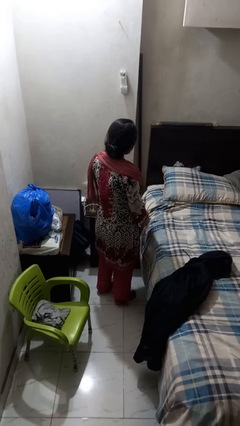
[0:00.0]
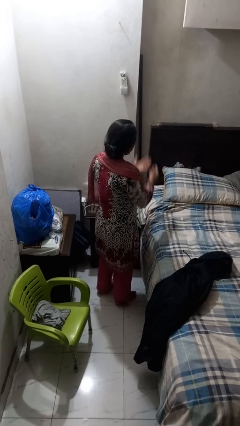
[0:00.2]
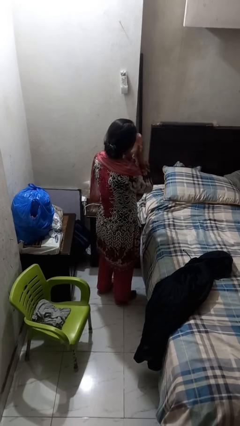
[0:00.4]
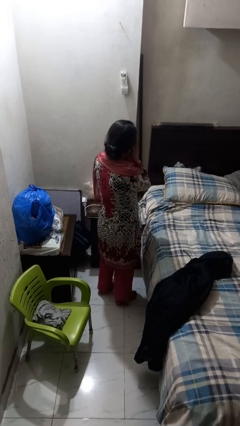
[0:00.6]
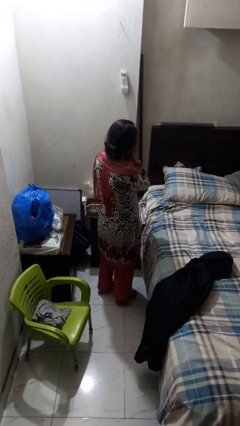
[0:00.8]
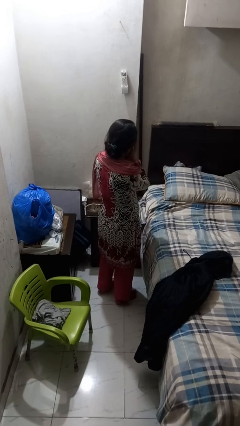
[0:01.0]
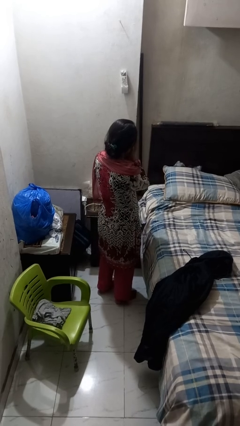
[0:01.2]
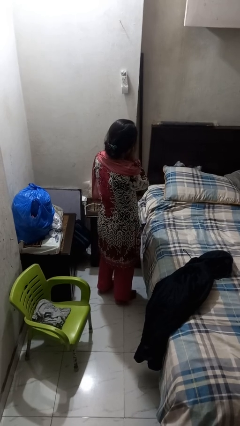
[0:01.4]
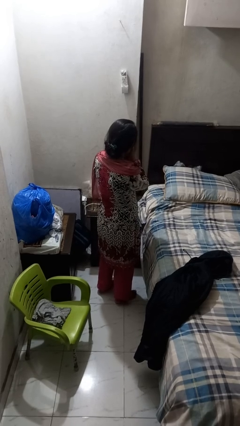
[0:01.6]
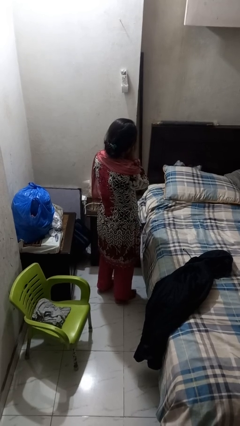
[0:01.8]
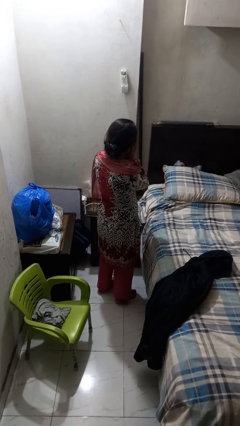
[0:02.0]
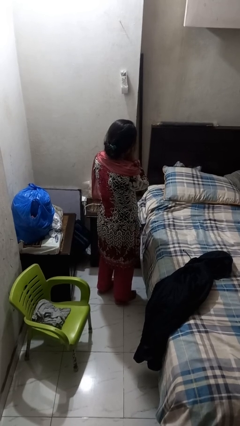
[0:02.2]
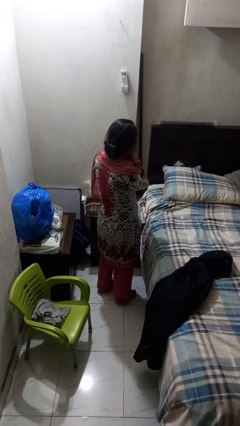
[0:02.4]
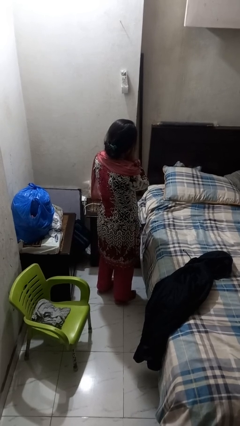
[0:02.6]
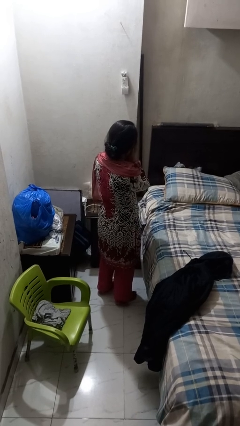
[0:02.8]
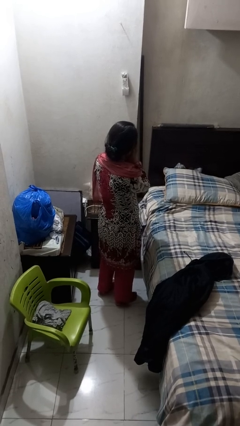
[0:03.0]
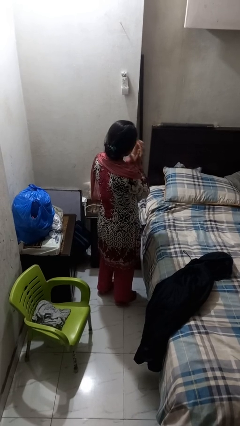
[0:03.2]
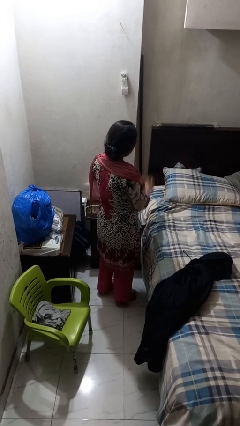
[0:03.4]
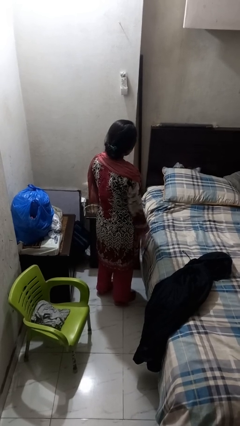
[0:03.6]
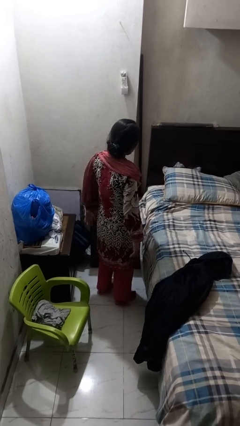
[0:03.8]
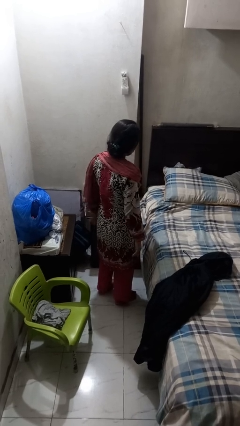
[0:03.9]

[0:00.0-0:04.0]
person covers face with hands

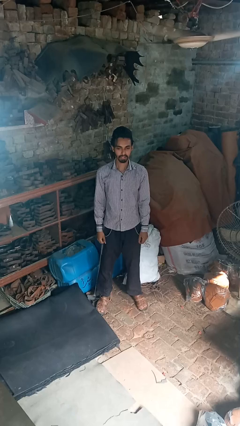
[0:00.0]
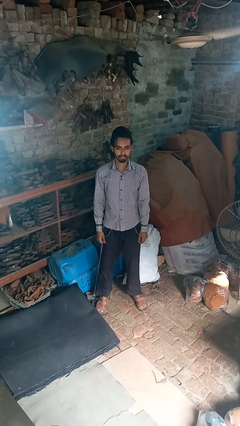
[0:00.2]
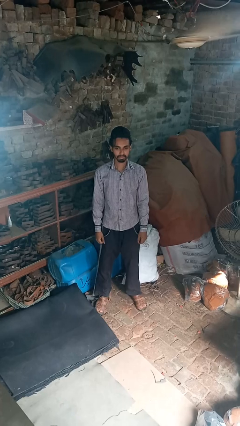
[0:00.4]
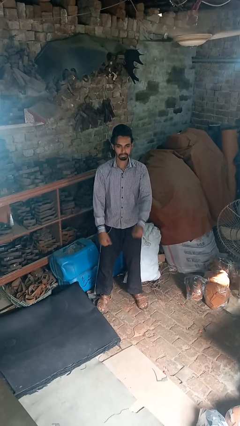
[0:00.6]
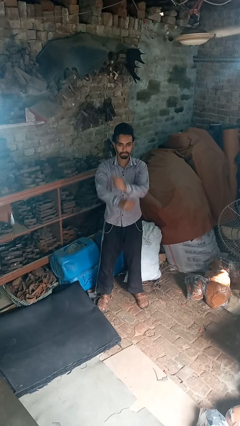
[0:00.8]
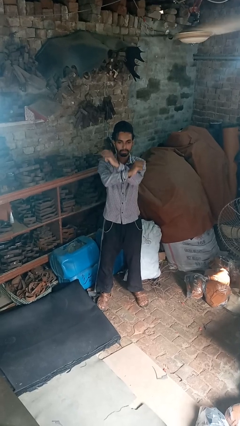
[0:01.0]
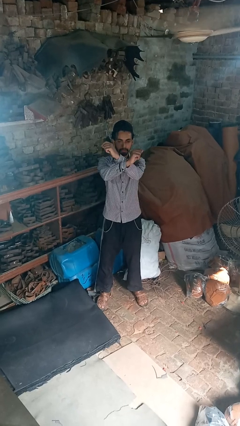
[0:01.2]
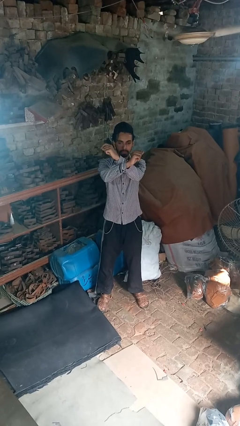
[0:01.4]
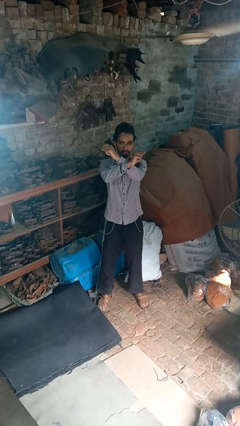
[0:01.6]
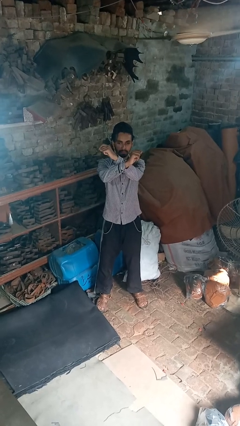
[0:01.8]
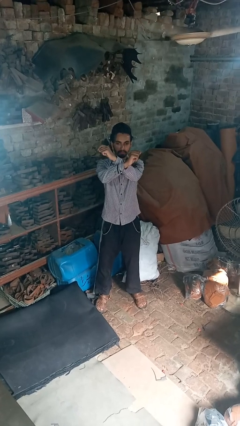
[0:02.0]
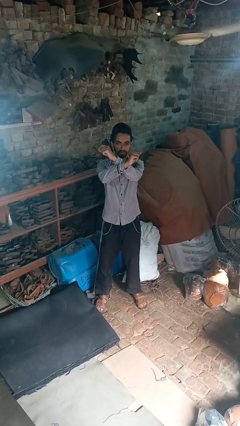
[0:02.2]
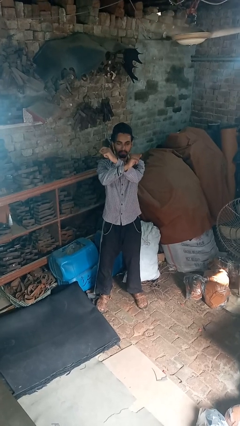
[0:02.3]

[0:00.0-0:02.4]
person crosses arms

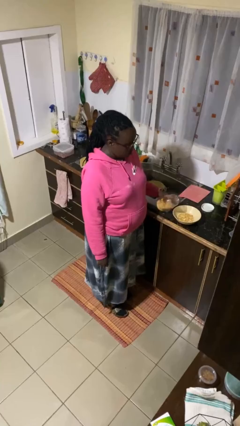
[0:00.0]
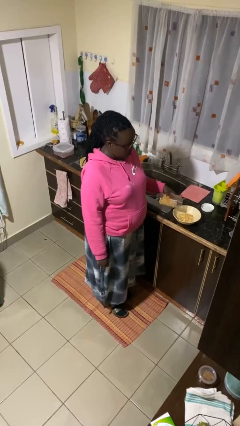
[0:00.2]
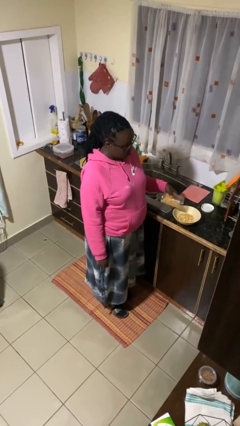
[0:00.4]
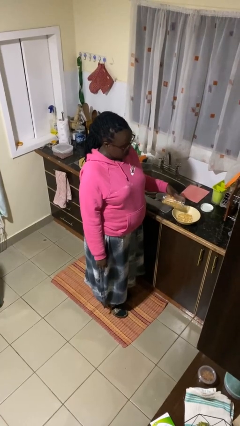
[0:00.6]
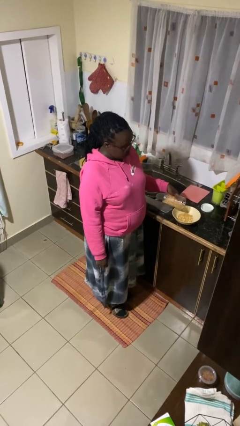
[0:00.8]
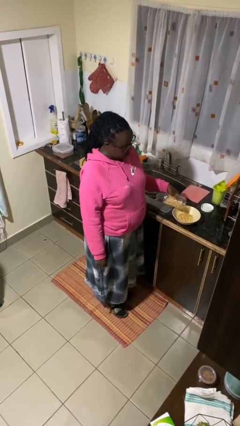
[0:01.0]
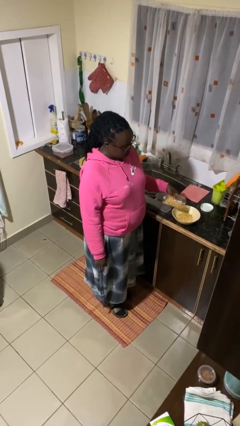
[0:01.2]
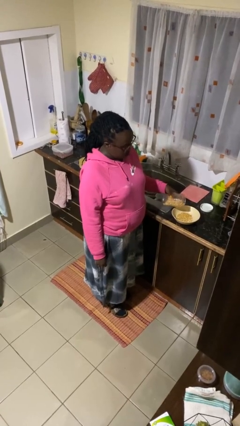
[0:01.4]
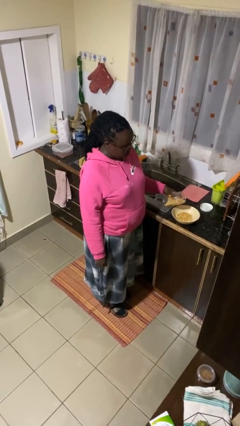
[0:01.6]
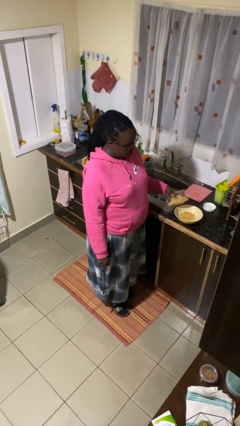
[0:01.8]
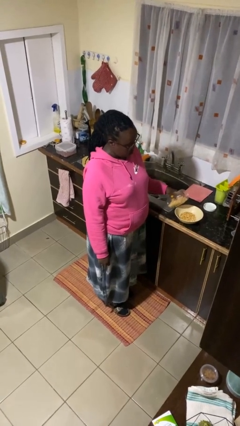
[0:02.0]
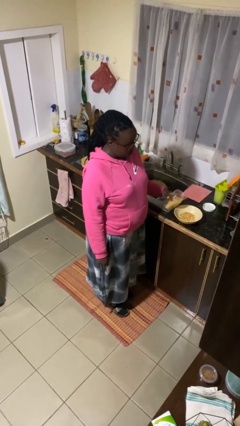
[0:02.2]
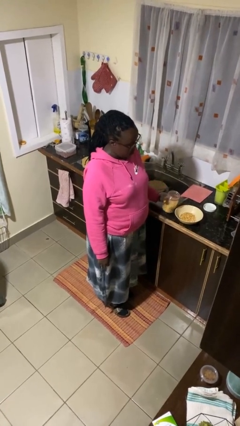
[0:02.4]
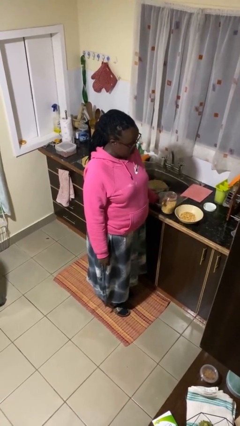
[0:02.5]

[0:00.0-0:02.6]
person pours into bowl

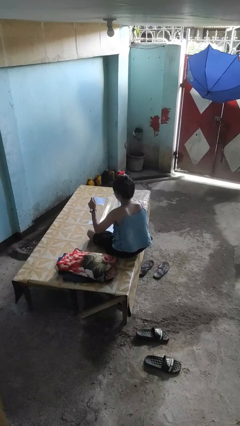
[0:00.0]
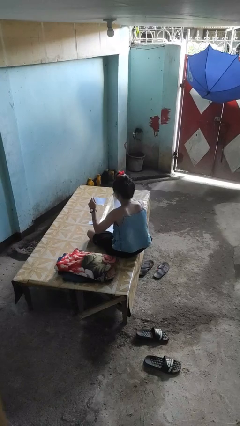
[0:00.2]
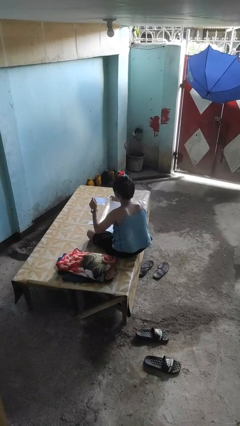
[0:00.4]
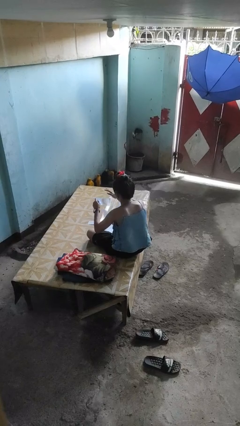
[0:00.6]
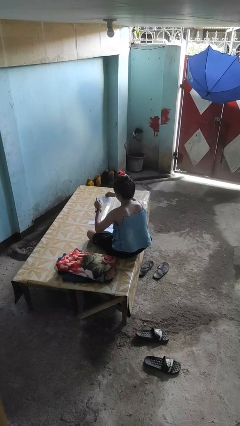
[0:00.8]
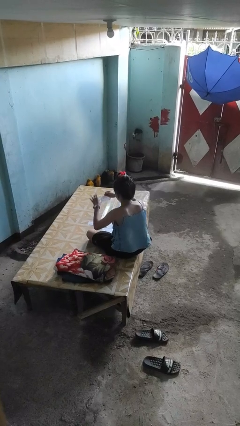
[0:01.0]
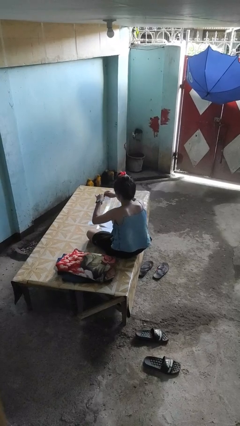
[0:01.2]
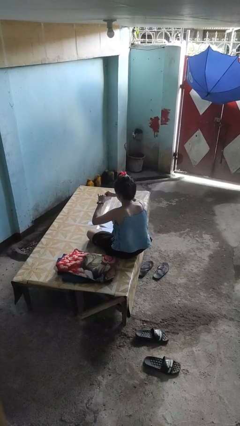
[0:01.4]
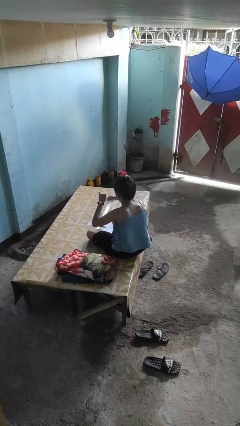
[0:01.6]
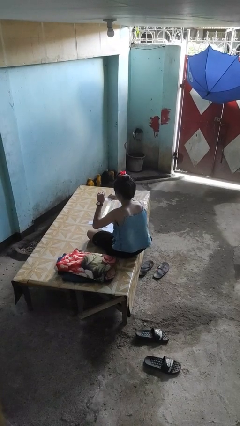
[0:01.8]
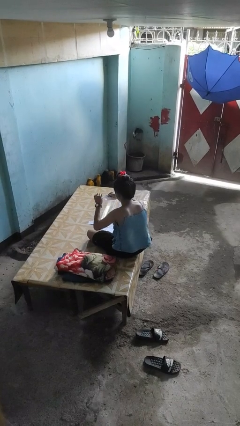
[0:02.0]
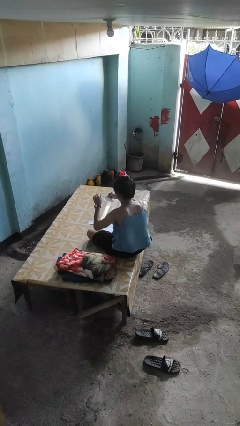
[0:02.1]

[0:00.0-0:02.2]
person tears paper

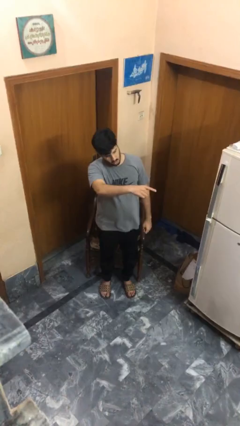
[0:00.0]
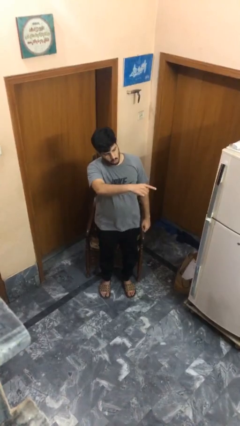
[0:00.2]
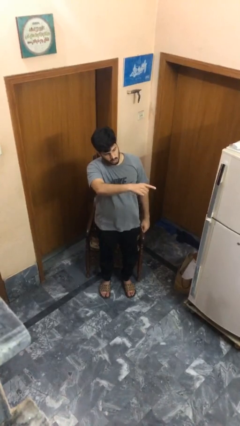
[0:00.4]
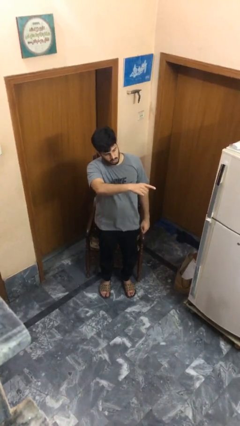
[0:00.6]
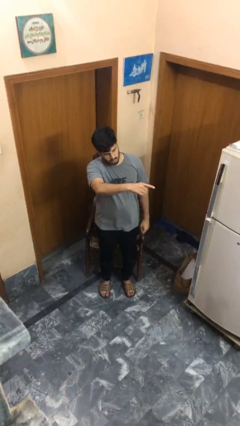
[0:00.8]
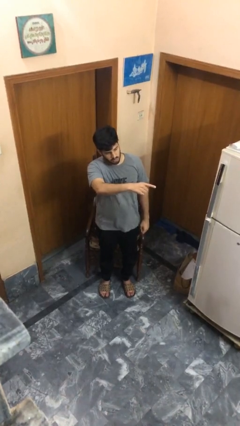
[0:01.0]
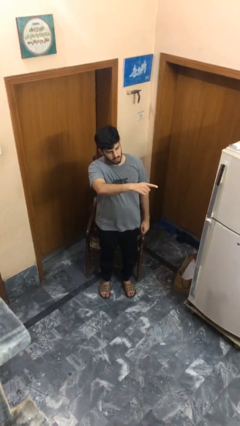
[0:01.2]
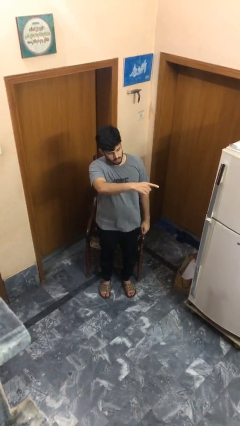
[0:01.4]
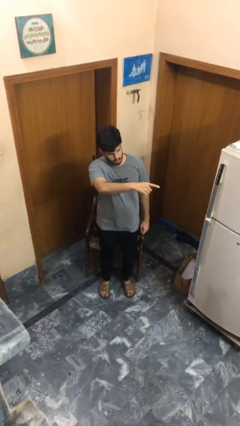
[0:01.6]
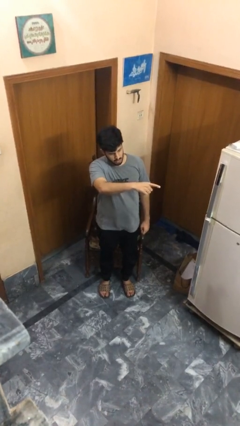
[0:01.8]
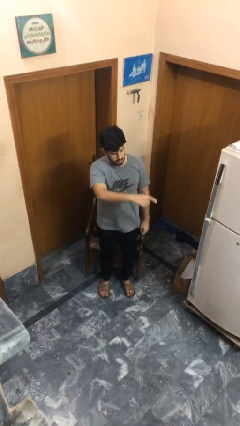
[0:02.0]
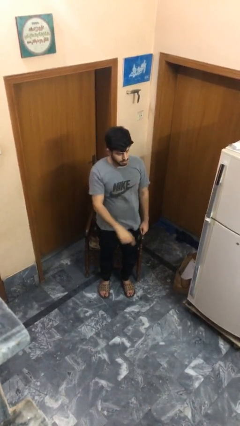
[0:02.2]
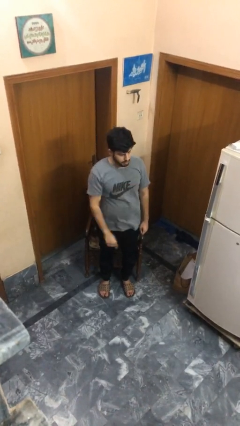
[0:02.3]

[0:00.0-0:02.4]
person points at person

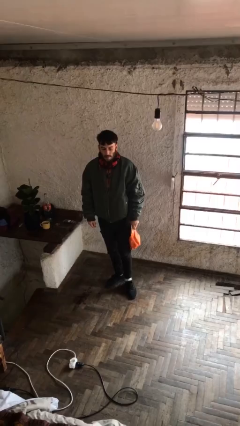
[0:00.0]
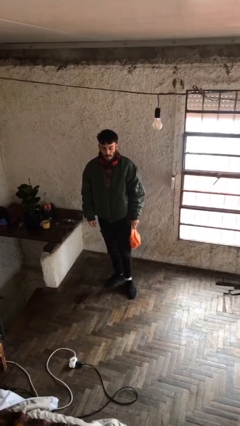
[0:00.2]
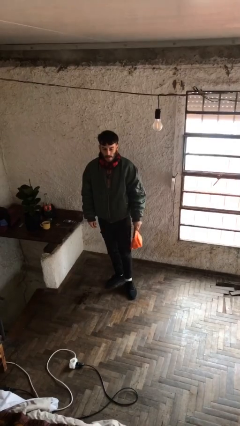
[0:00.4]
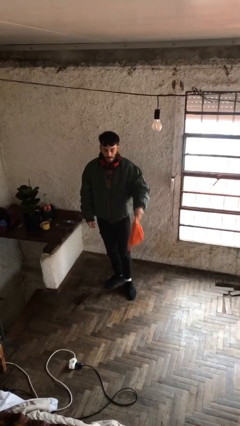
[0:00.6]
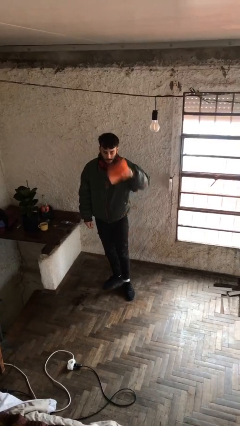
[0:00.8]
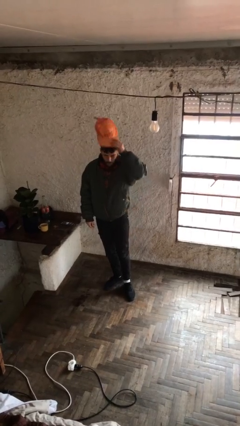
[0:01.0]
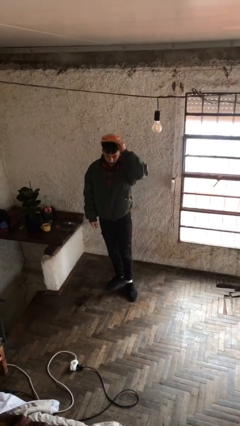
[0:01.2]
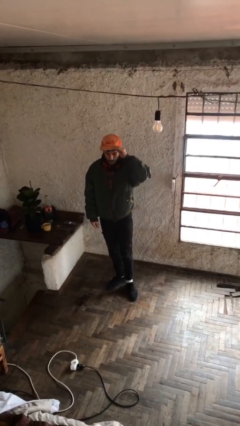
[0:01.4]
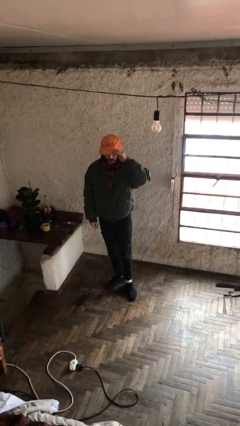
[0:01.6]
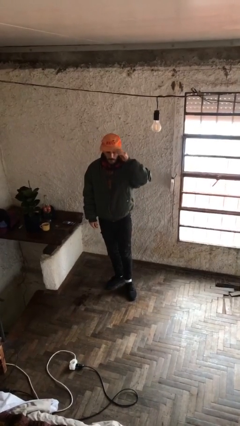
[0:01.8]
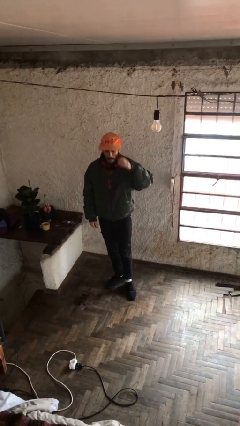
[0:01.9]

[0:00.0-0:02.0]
person puts on hat

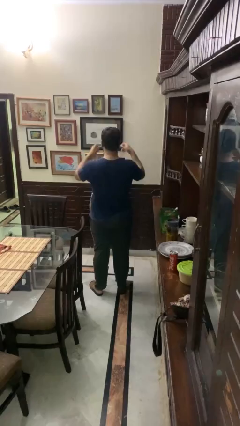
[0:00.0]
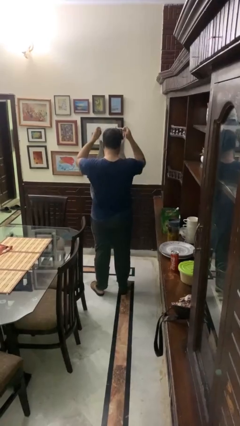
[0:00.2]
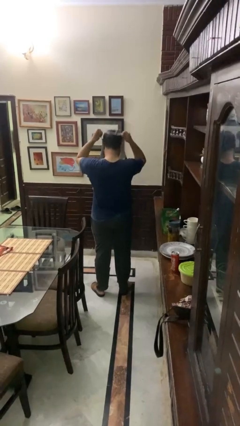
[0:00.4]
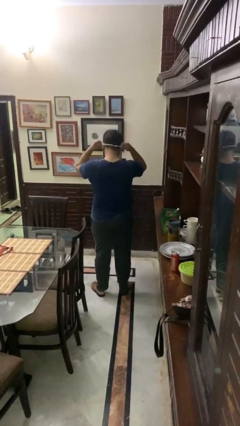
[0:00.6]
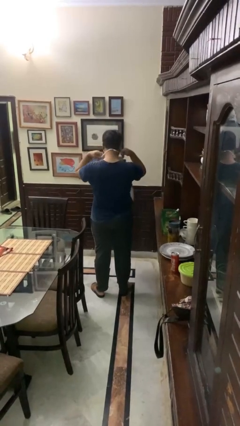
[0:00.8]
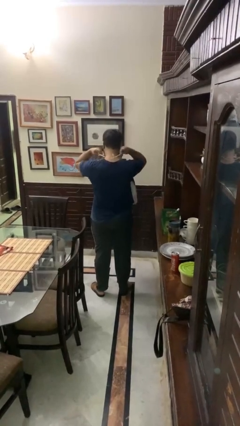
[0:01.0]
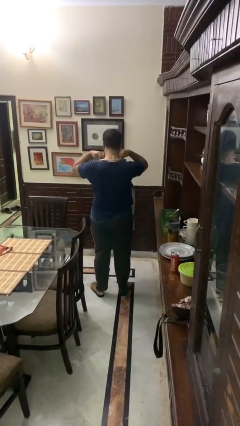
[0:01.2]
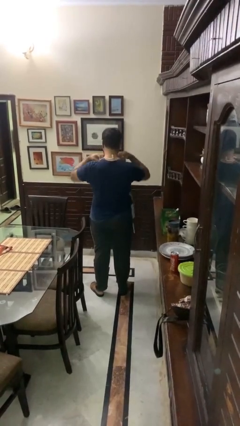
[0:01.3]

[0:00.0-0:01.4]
person puts on apron
